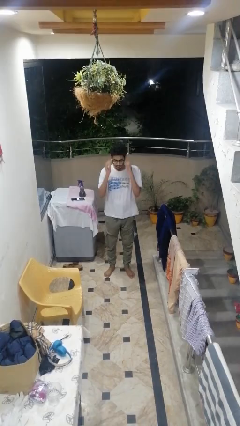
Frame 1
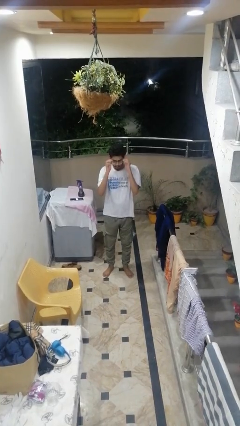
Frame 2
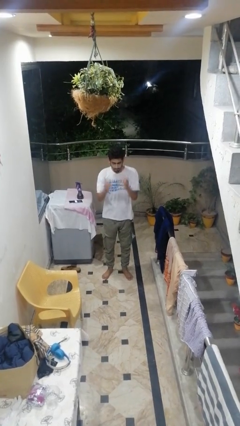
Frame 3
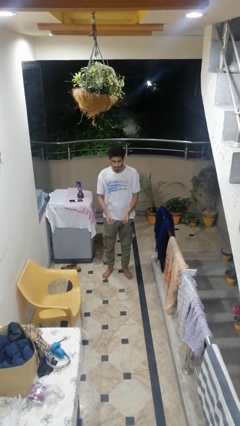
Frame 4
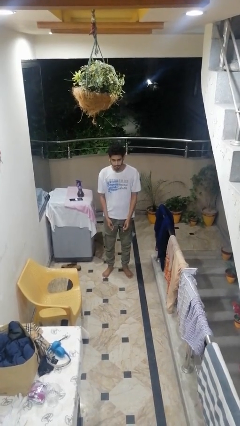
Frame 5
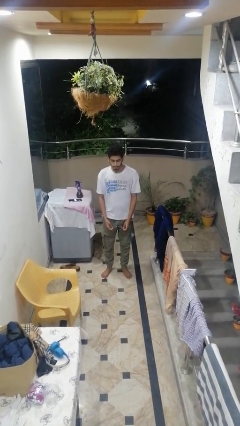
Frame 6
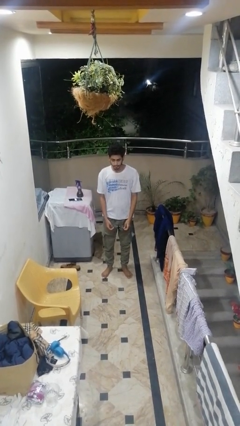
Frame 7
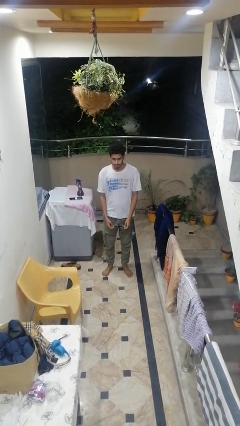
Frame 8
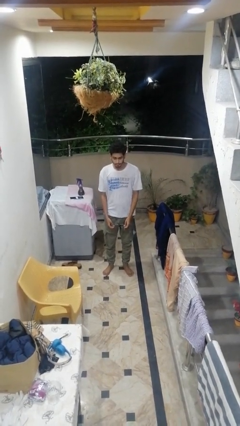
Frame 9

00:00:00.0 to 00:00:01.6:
person takes off glasses

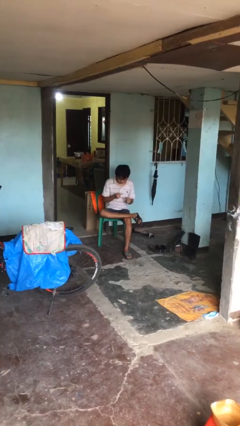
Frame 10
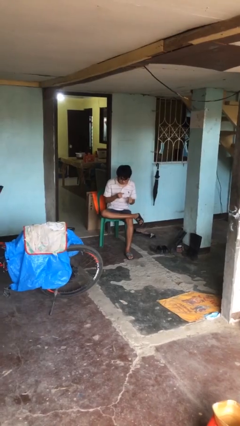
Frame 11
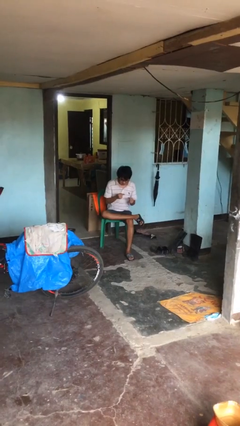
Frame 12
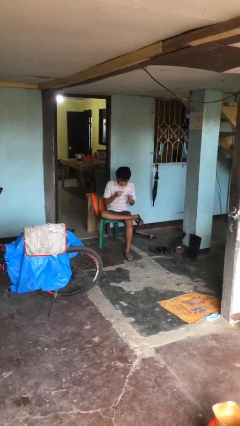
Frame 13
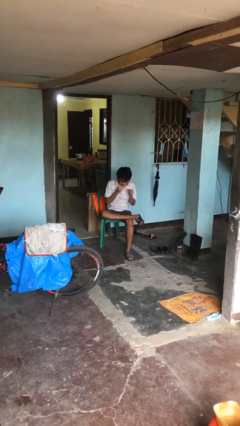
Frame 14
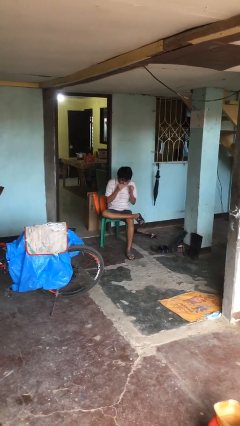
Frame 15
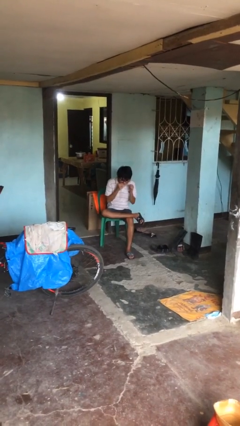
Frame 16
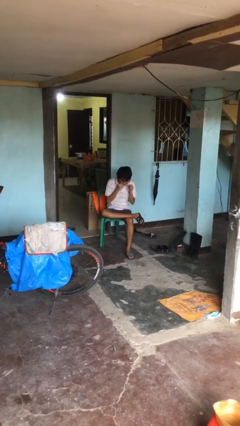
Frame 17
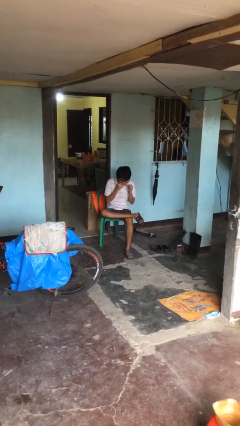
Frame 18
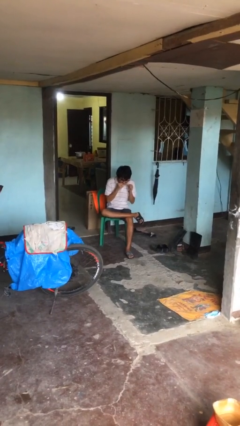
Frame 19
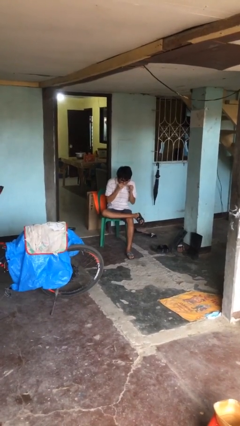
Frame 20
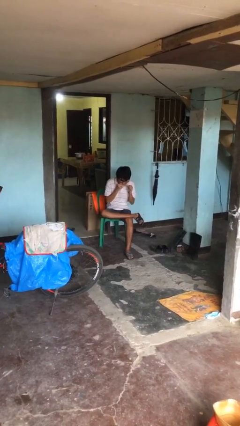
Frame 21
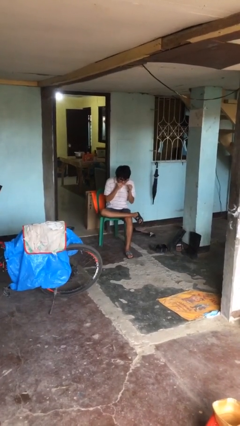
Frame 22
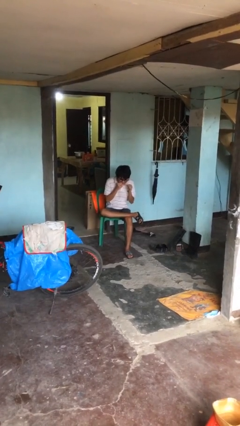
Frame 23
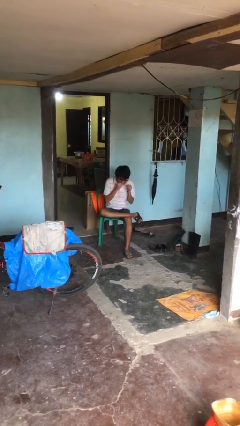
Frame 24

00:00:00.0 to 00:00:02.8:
person flosses

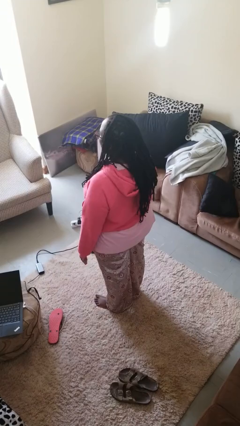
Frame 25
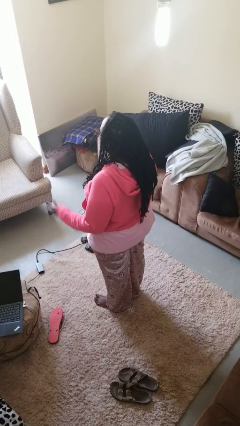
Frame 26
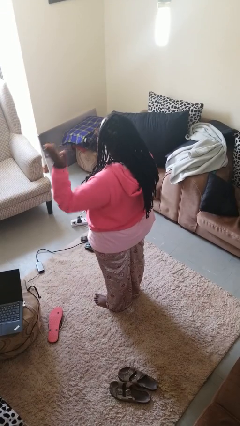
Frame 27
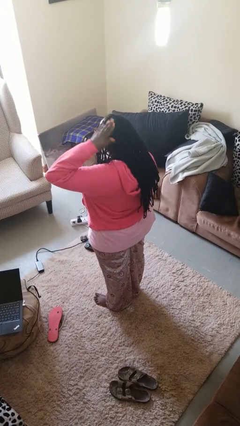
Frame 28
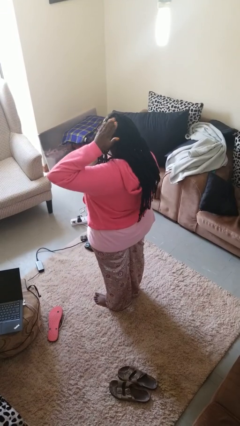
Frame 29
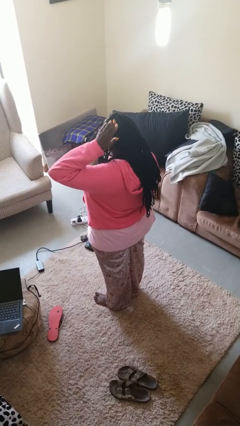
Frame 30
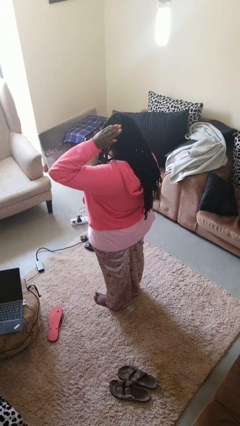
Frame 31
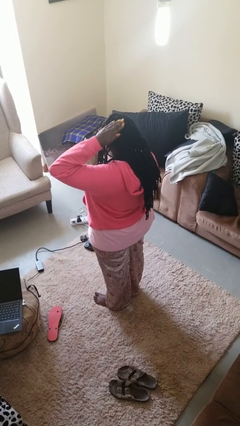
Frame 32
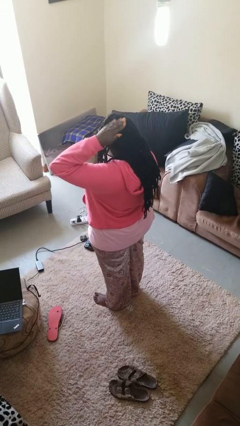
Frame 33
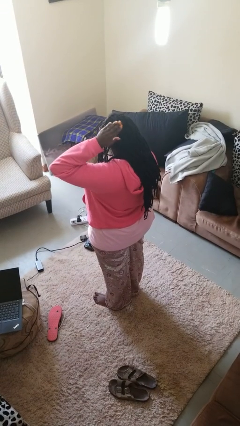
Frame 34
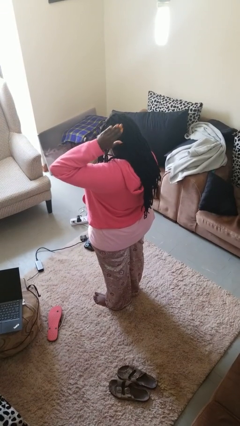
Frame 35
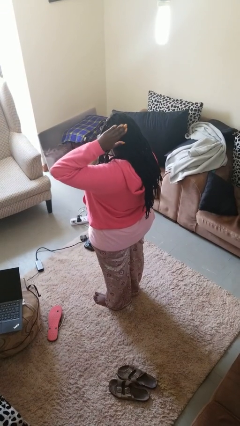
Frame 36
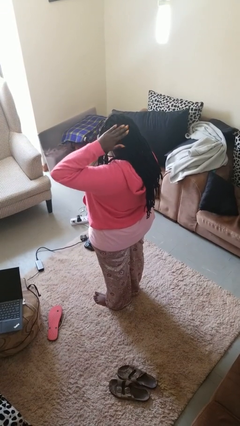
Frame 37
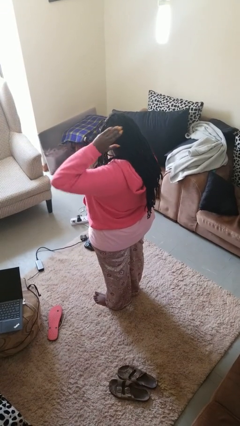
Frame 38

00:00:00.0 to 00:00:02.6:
person pats head

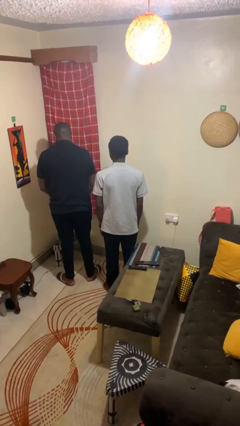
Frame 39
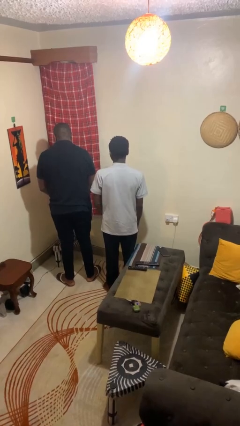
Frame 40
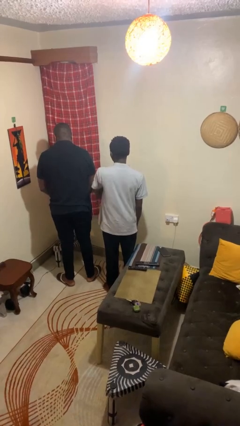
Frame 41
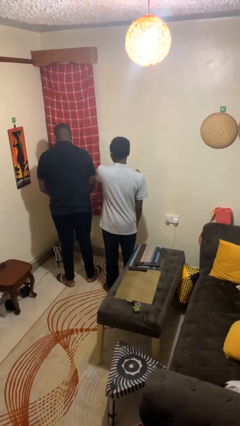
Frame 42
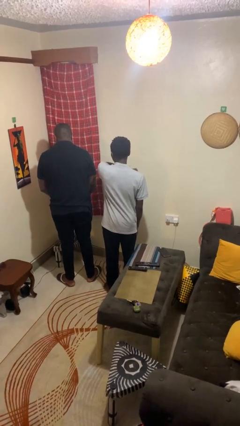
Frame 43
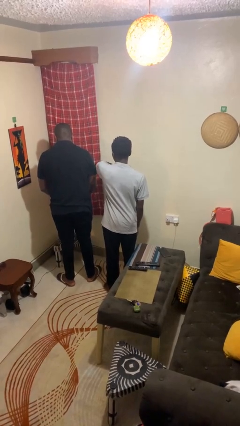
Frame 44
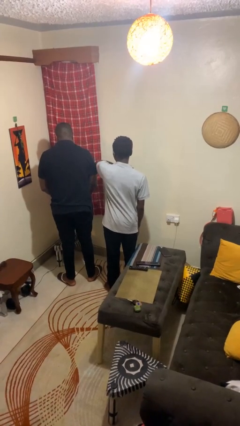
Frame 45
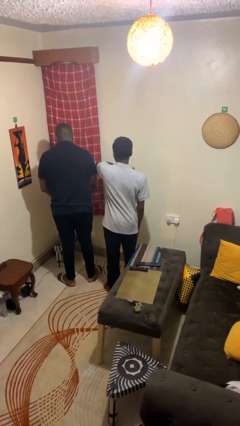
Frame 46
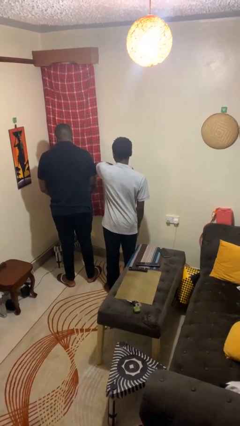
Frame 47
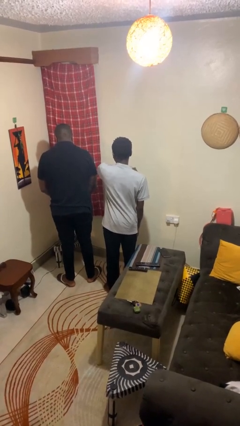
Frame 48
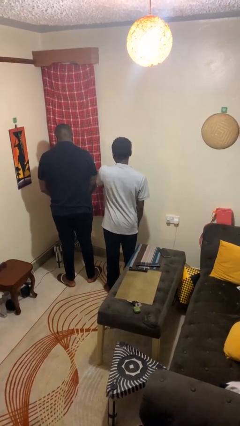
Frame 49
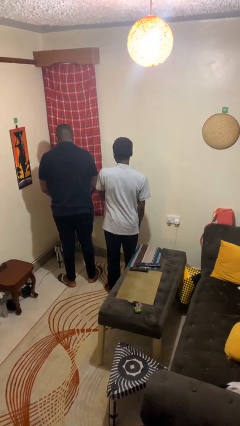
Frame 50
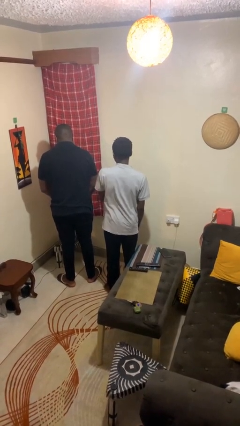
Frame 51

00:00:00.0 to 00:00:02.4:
person nudges person with elbow

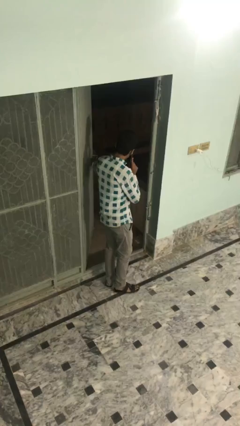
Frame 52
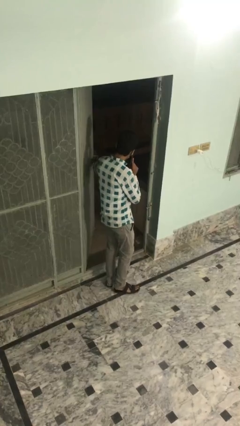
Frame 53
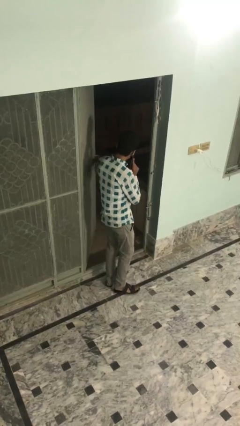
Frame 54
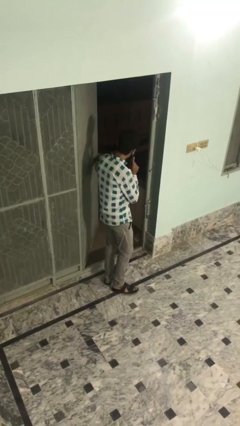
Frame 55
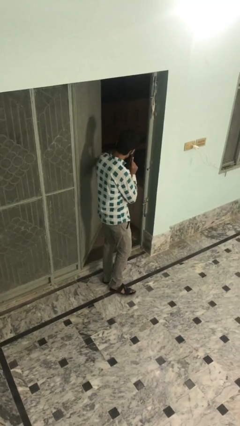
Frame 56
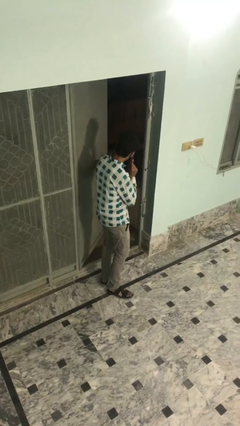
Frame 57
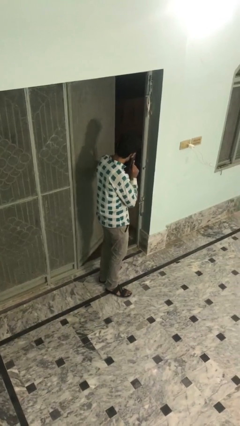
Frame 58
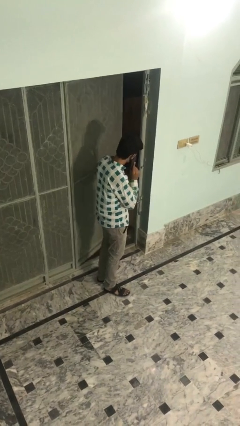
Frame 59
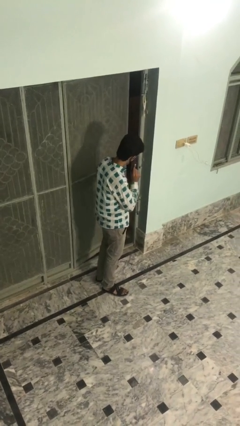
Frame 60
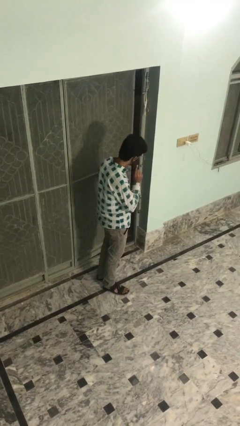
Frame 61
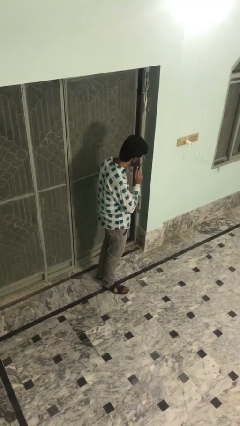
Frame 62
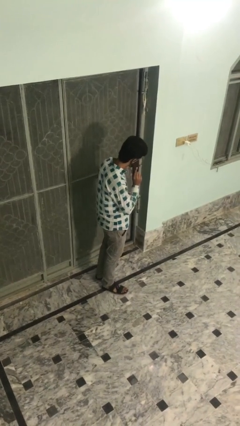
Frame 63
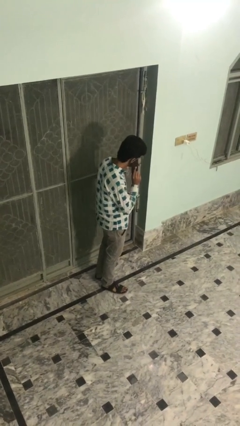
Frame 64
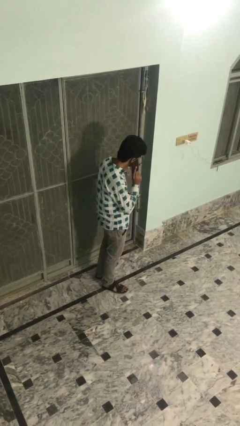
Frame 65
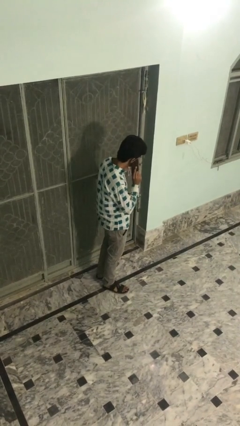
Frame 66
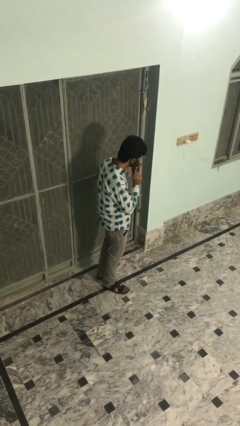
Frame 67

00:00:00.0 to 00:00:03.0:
person closes facility door

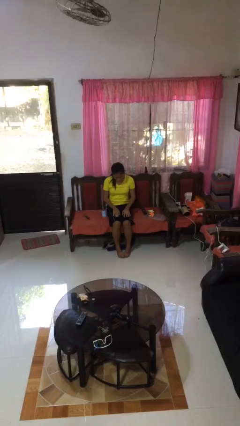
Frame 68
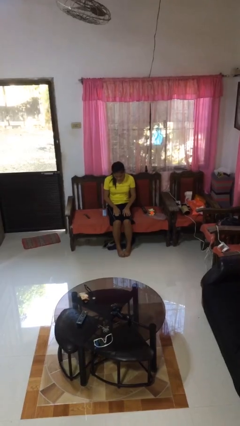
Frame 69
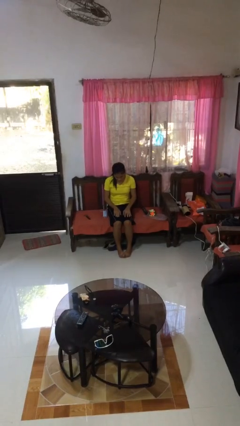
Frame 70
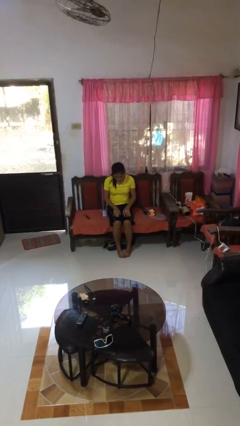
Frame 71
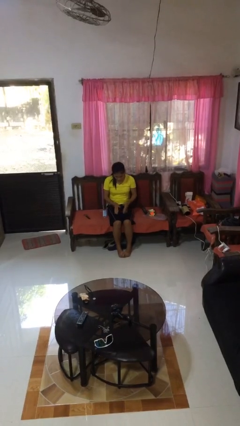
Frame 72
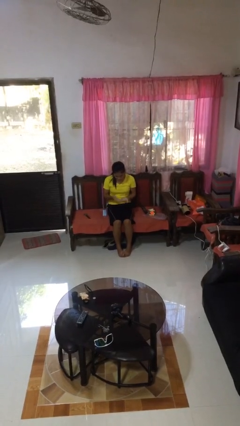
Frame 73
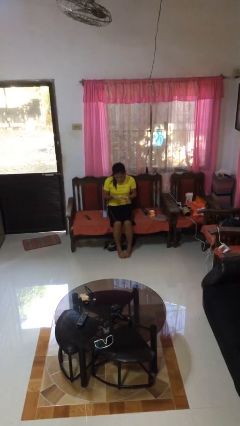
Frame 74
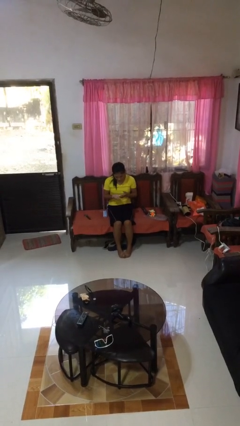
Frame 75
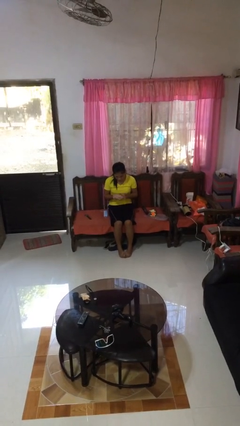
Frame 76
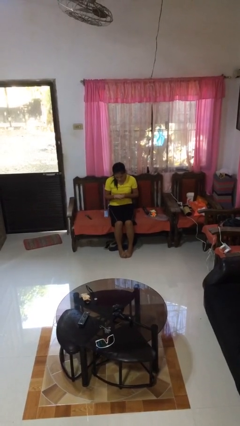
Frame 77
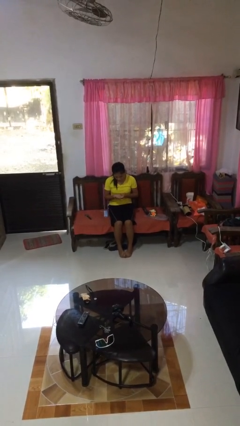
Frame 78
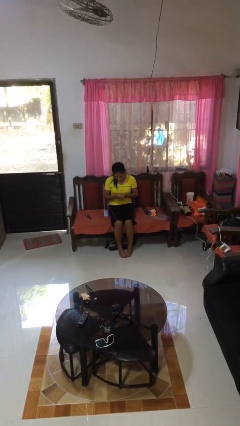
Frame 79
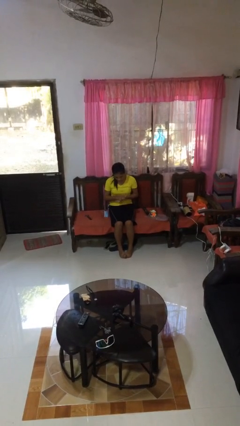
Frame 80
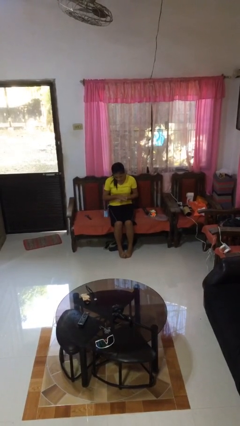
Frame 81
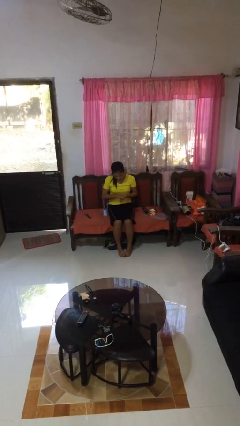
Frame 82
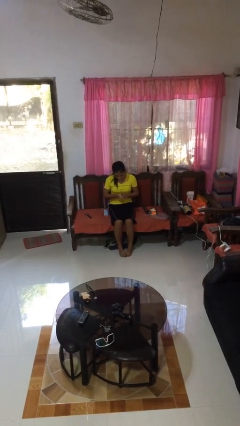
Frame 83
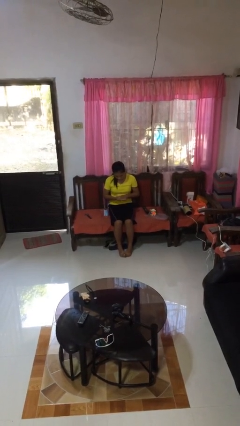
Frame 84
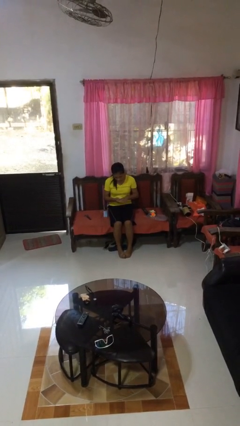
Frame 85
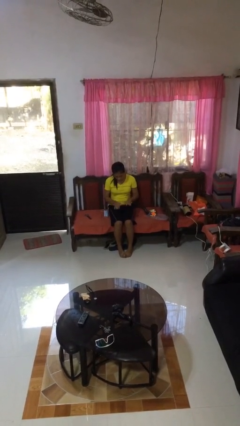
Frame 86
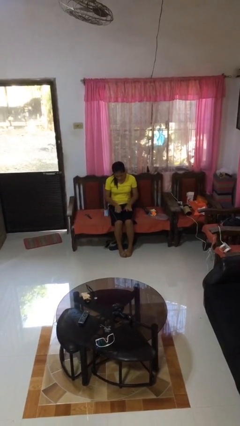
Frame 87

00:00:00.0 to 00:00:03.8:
person looks at hands in lap

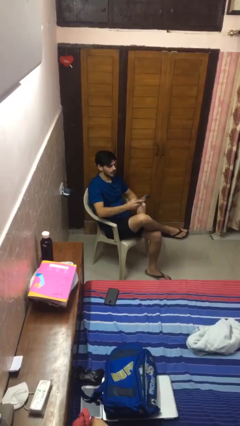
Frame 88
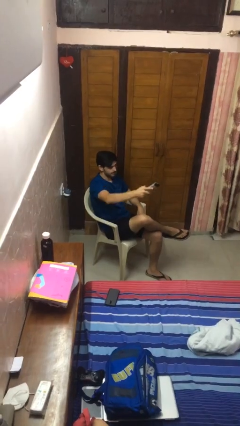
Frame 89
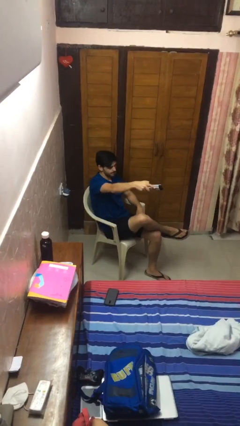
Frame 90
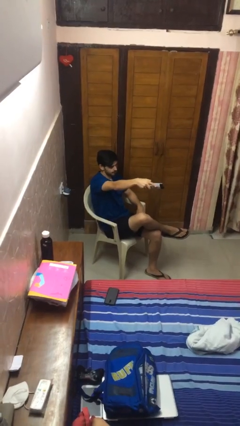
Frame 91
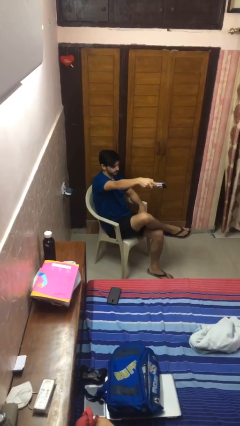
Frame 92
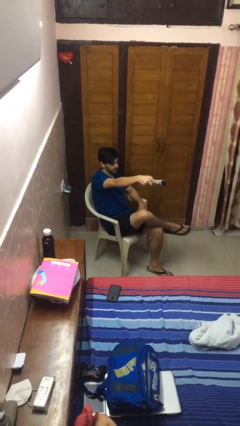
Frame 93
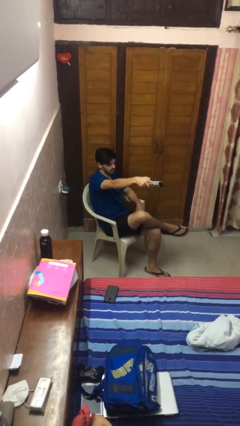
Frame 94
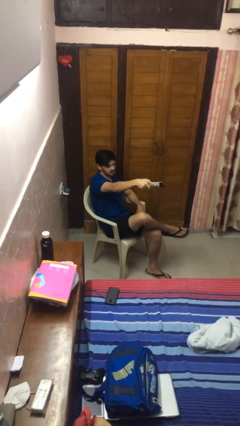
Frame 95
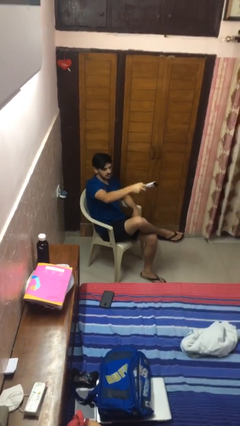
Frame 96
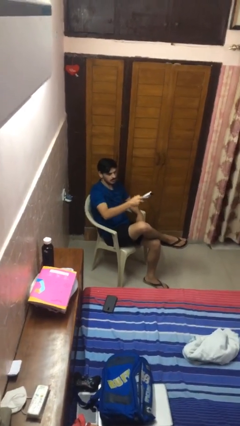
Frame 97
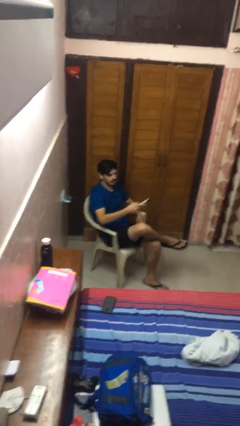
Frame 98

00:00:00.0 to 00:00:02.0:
person uses television remote
